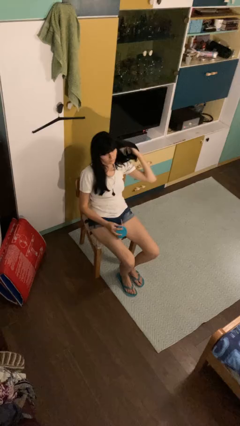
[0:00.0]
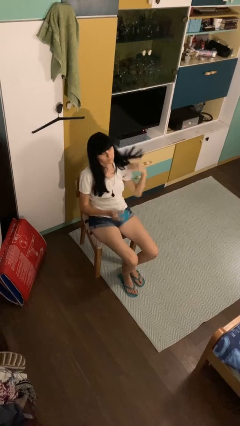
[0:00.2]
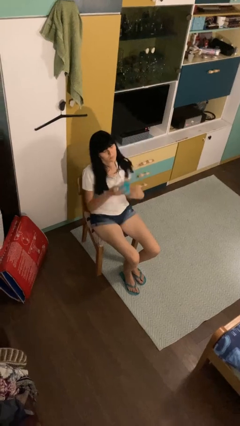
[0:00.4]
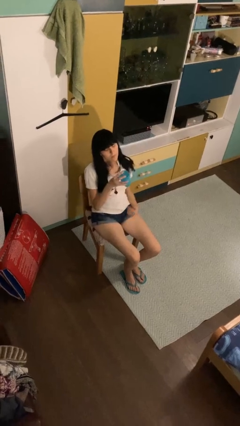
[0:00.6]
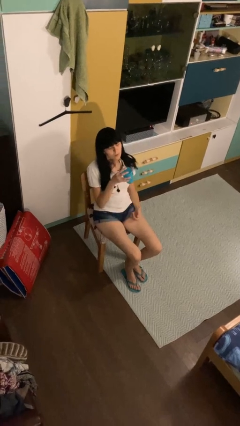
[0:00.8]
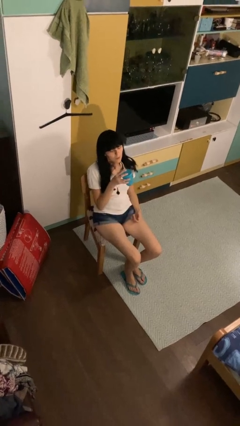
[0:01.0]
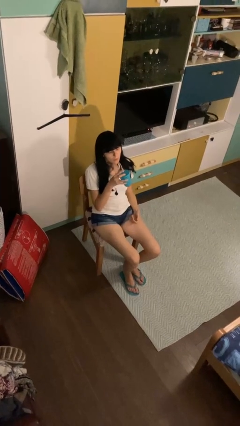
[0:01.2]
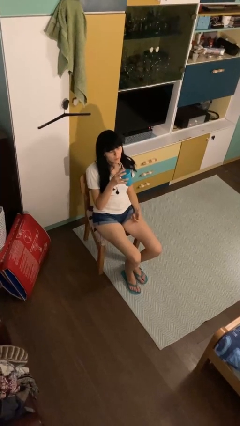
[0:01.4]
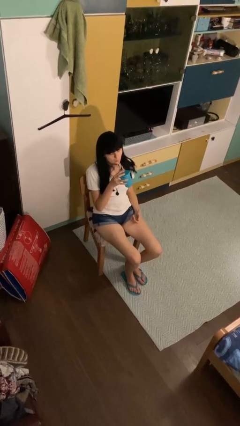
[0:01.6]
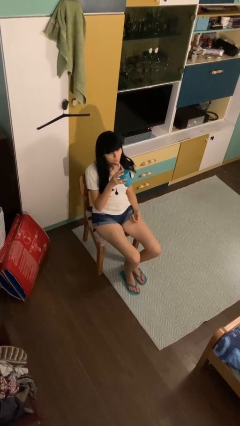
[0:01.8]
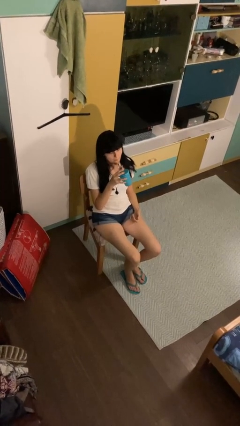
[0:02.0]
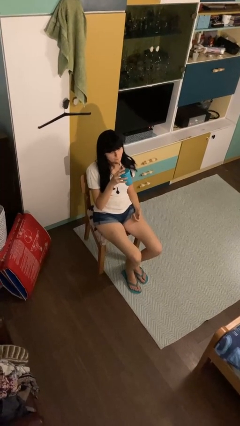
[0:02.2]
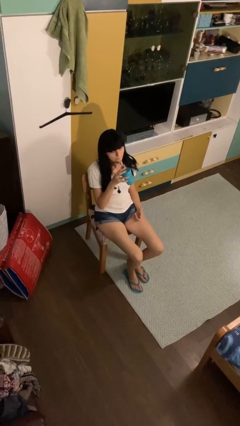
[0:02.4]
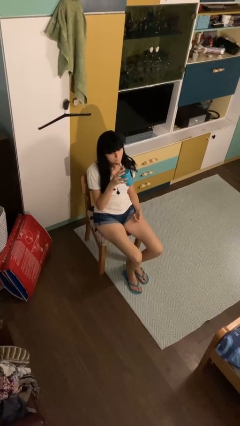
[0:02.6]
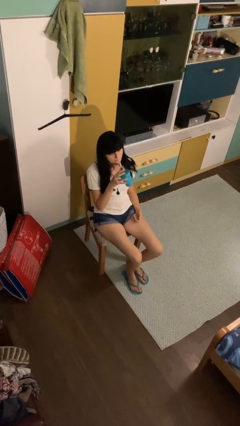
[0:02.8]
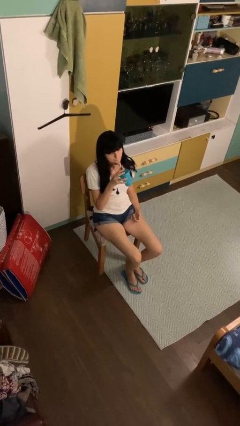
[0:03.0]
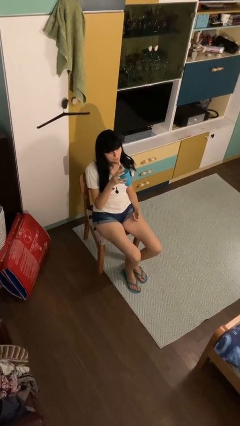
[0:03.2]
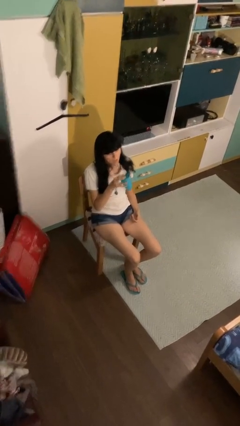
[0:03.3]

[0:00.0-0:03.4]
person drinks from straw

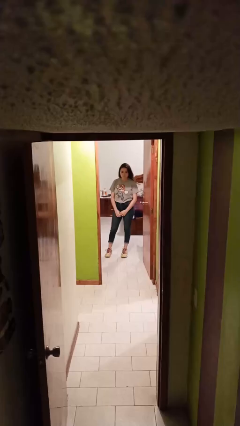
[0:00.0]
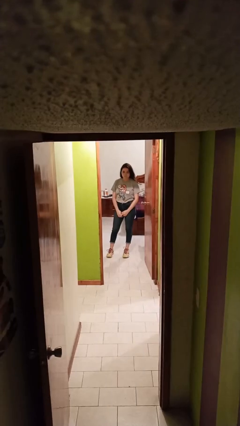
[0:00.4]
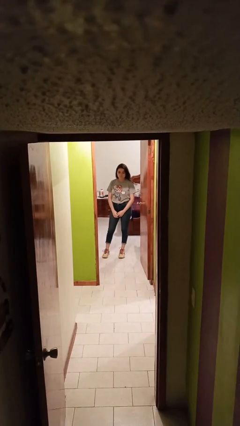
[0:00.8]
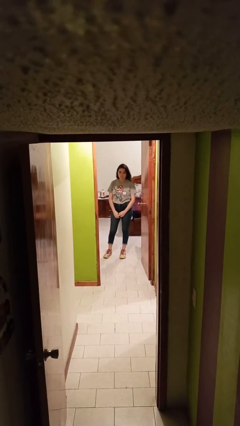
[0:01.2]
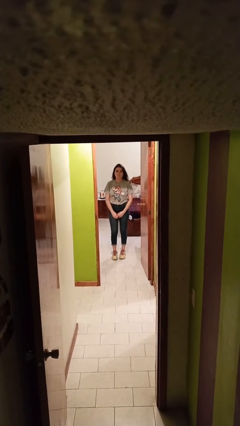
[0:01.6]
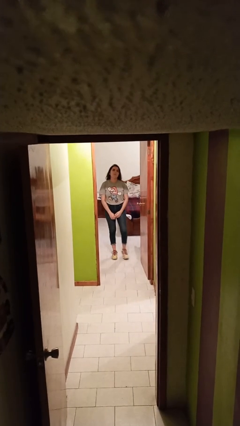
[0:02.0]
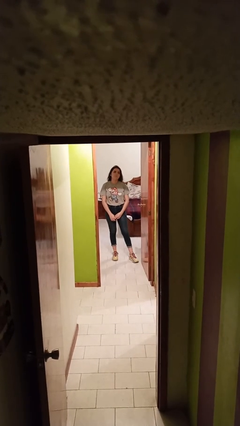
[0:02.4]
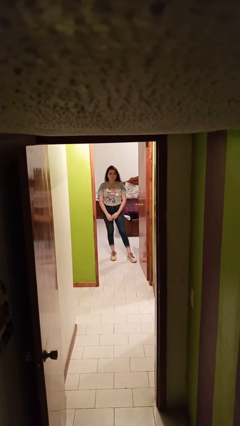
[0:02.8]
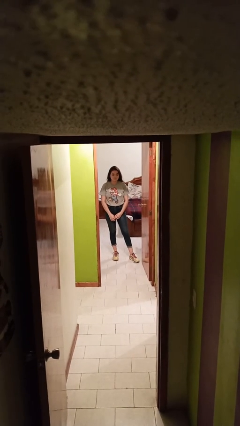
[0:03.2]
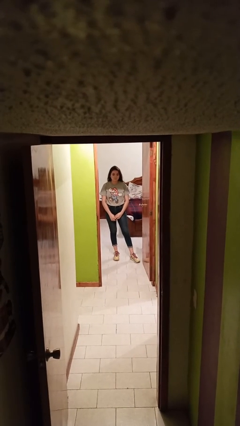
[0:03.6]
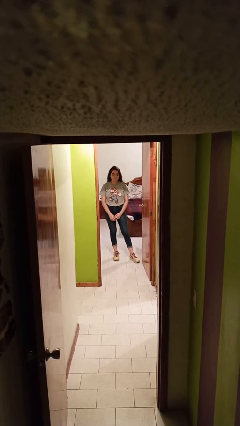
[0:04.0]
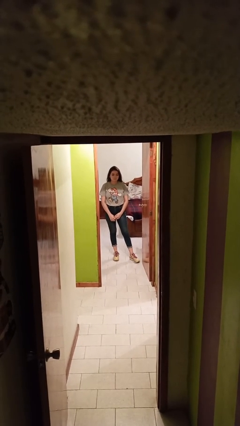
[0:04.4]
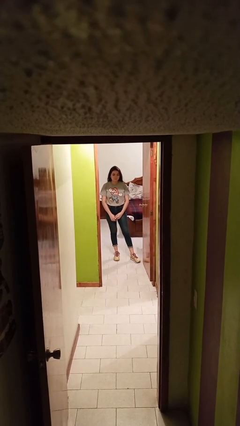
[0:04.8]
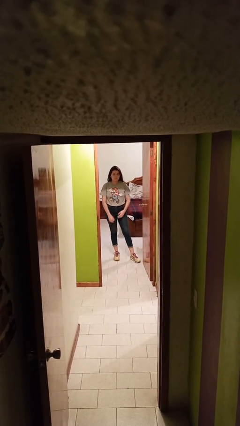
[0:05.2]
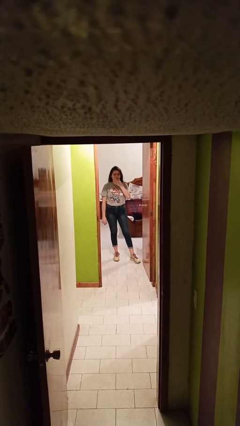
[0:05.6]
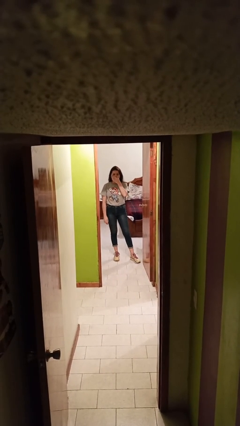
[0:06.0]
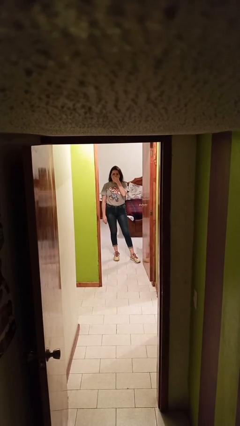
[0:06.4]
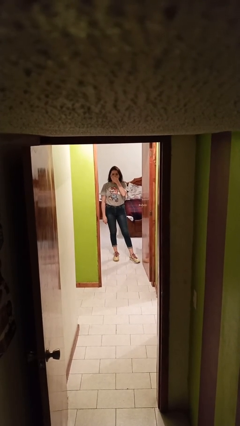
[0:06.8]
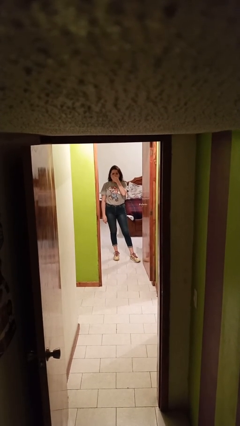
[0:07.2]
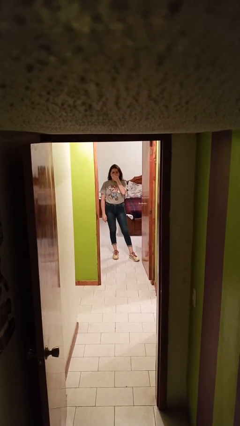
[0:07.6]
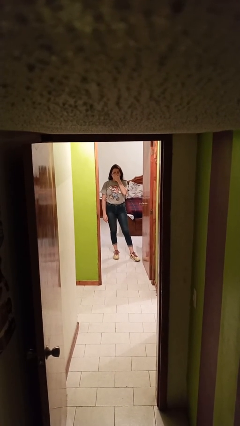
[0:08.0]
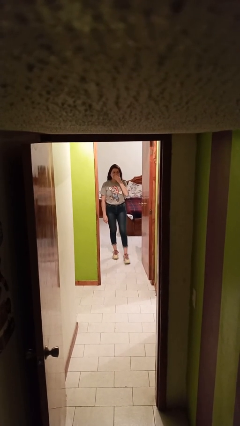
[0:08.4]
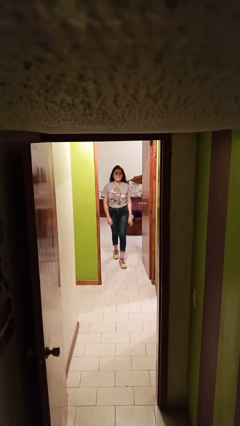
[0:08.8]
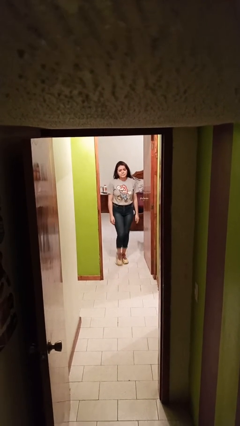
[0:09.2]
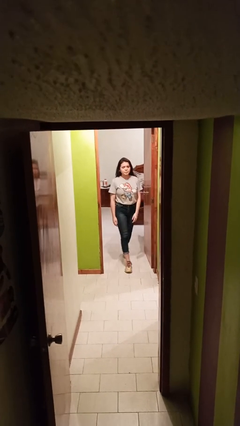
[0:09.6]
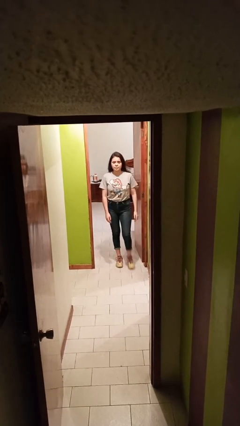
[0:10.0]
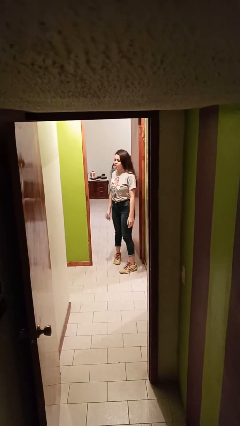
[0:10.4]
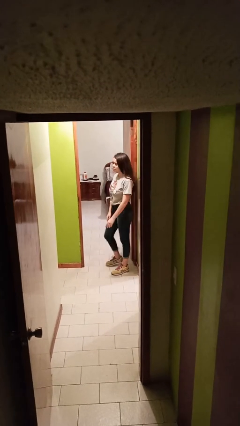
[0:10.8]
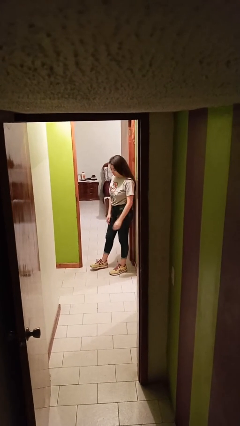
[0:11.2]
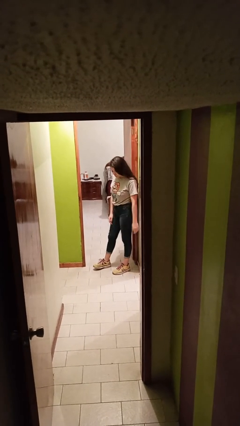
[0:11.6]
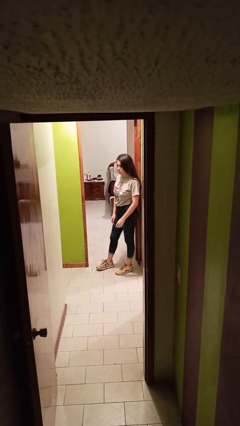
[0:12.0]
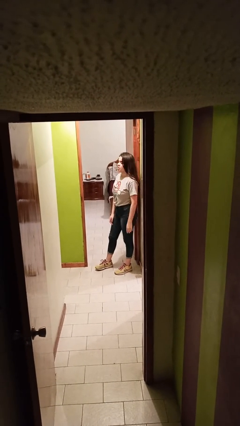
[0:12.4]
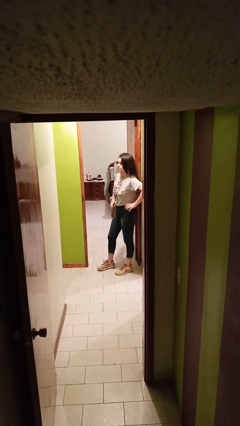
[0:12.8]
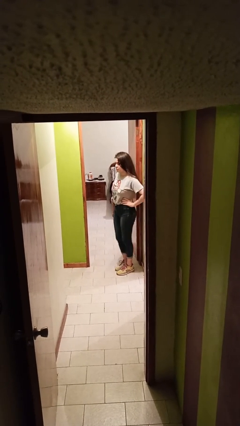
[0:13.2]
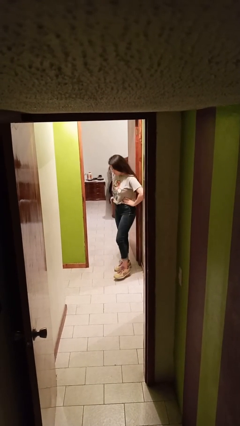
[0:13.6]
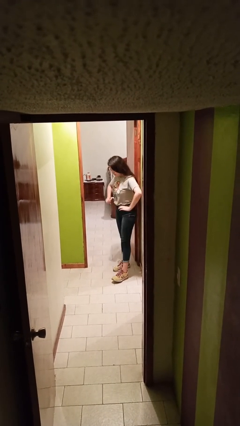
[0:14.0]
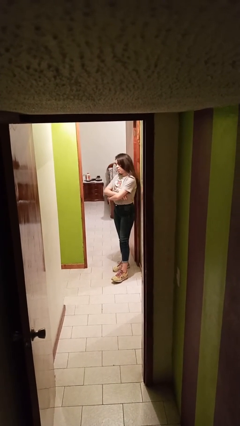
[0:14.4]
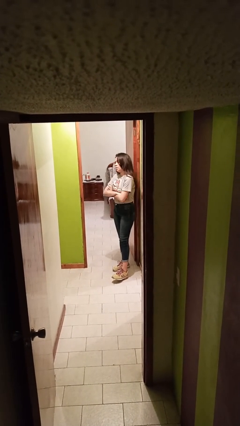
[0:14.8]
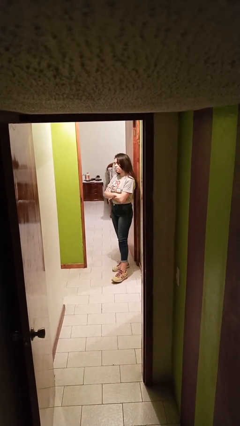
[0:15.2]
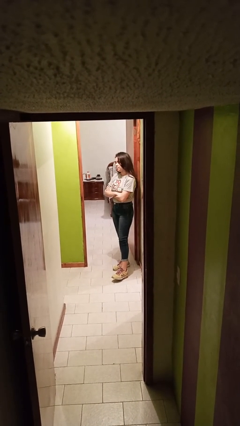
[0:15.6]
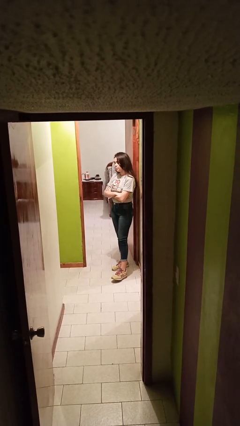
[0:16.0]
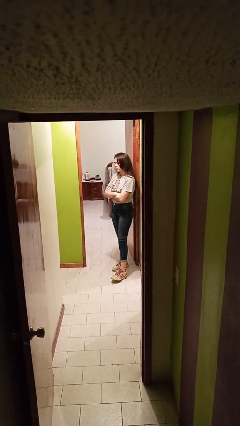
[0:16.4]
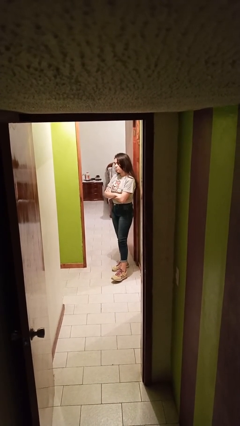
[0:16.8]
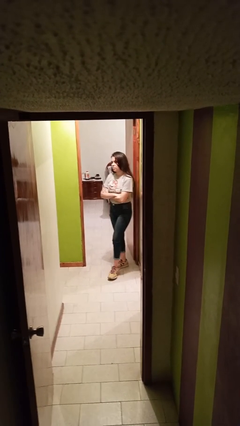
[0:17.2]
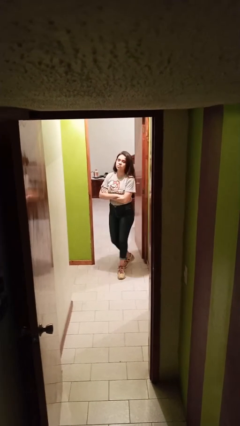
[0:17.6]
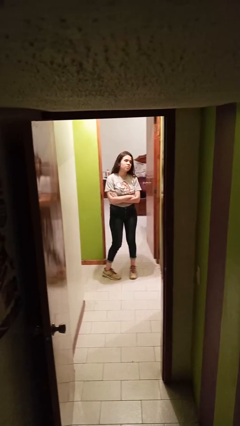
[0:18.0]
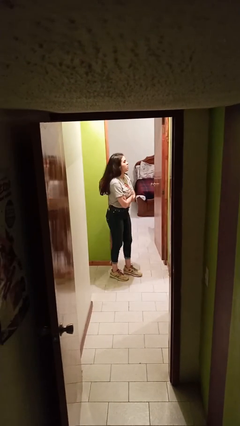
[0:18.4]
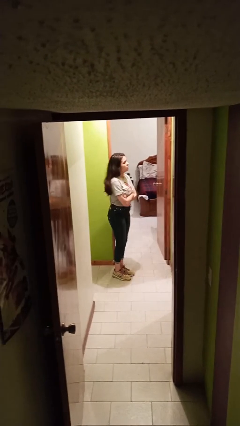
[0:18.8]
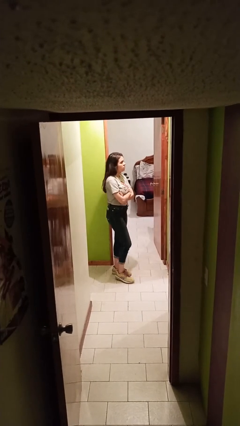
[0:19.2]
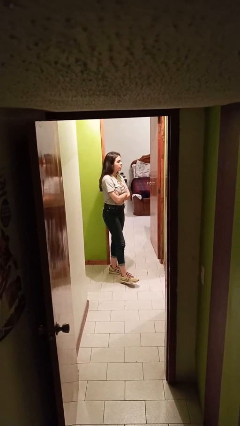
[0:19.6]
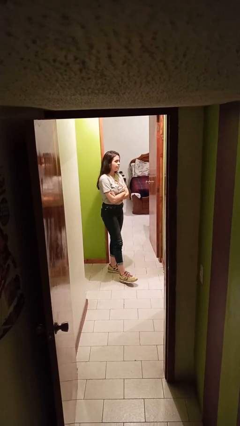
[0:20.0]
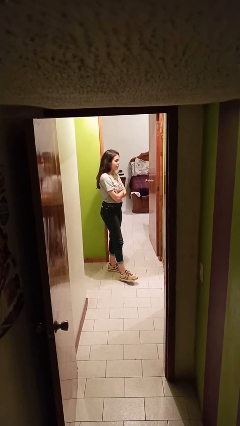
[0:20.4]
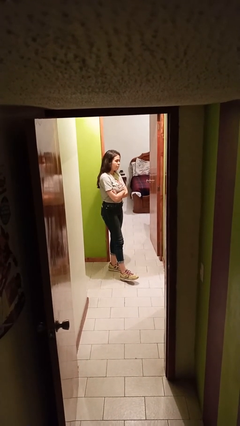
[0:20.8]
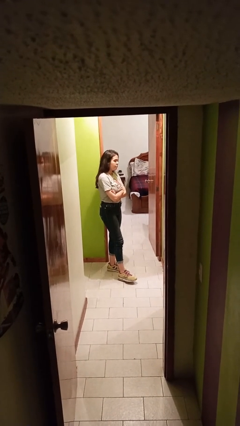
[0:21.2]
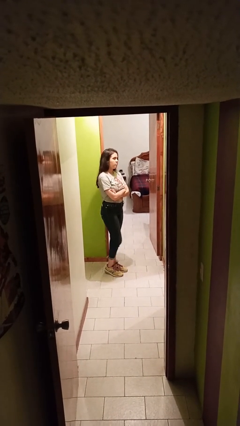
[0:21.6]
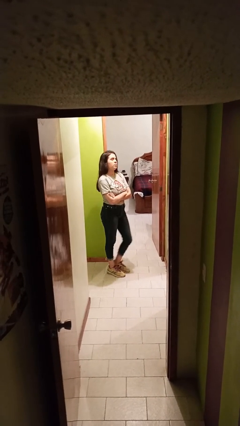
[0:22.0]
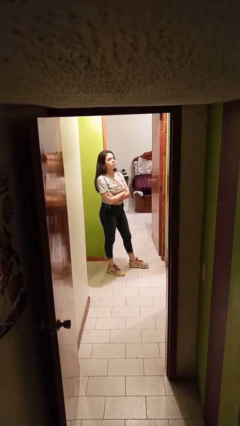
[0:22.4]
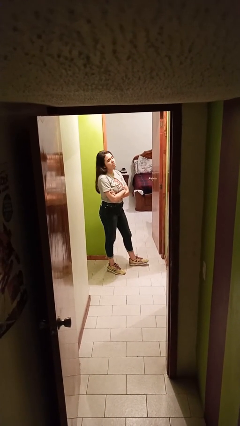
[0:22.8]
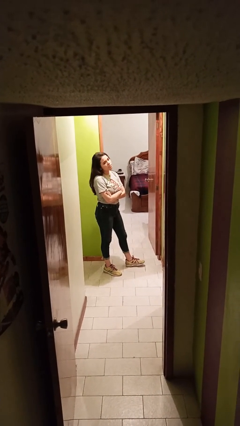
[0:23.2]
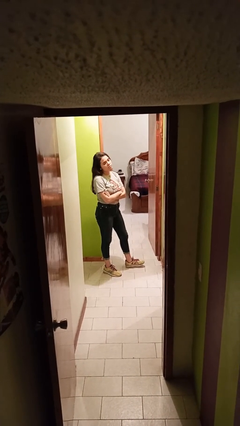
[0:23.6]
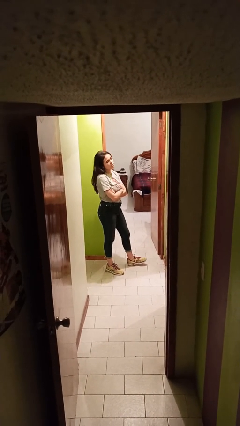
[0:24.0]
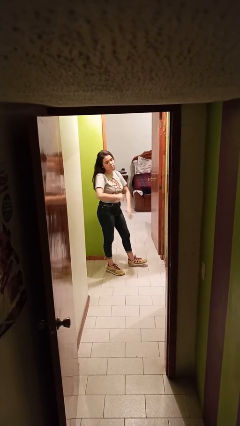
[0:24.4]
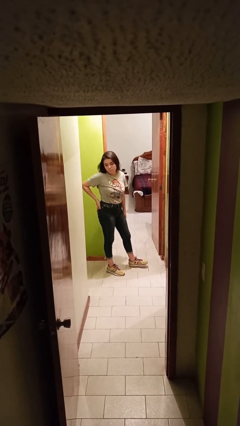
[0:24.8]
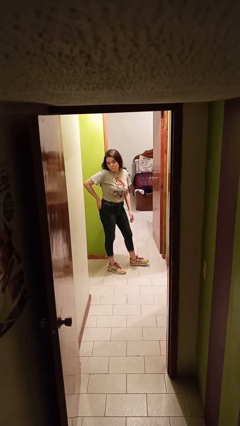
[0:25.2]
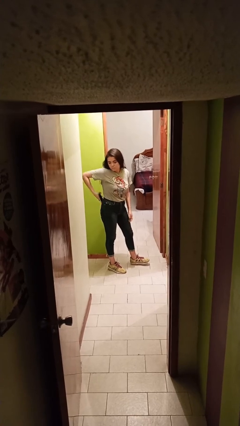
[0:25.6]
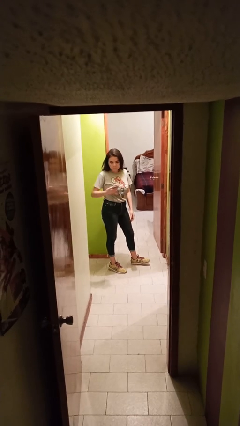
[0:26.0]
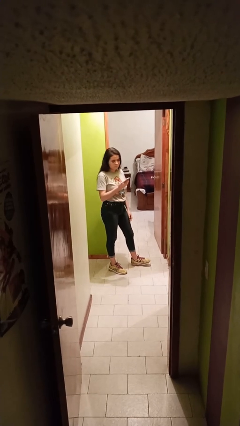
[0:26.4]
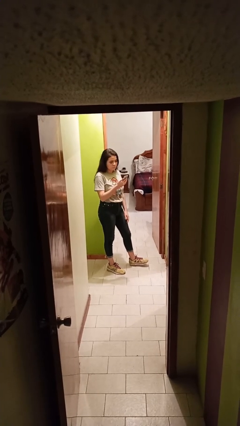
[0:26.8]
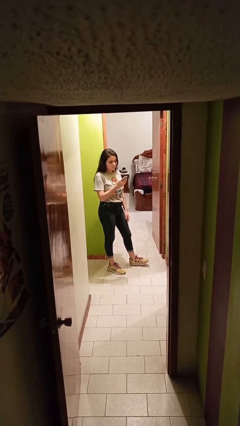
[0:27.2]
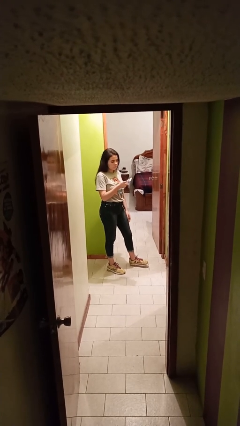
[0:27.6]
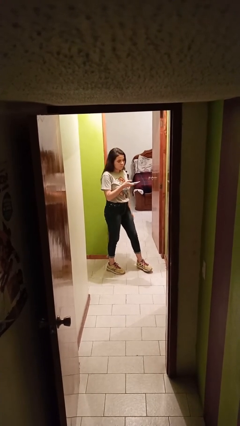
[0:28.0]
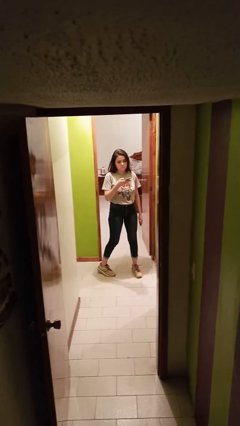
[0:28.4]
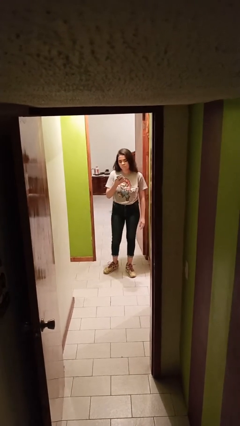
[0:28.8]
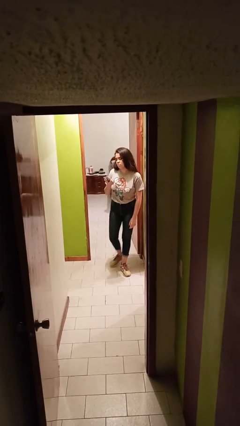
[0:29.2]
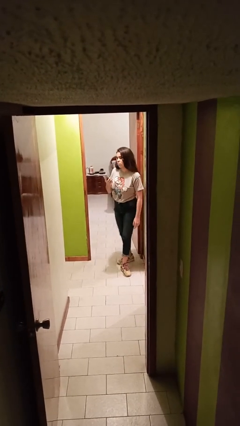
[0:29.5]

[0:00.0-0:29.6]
person walks
